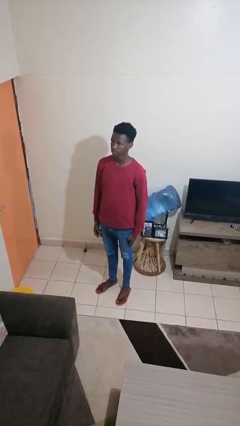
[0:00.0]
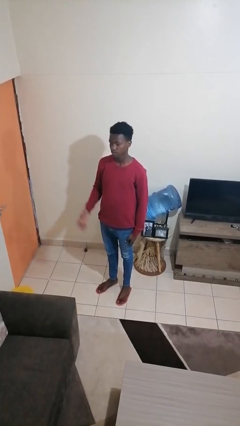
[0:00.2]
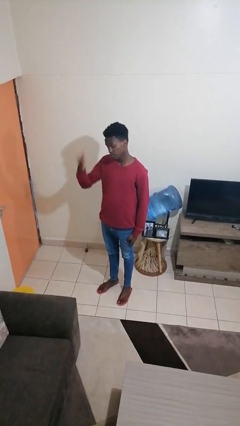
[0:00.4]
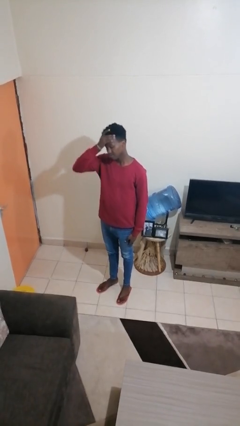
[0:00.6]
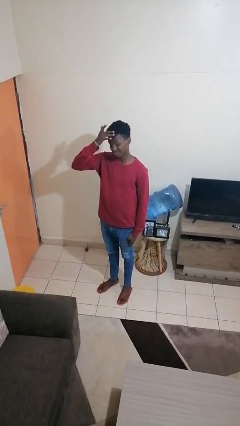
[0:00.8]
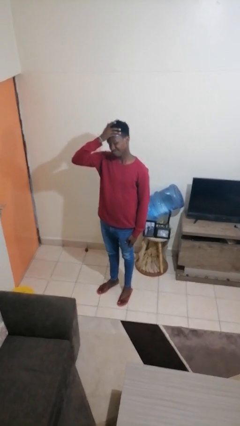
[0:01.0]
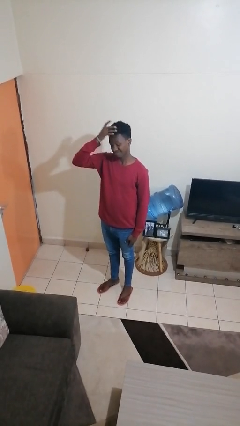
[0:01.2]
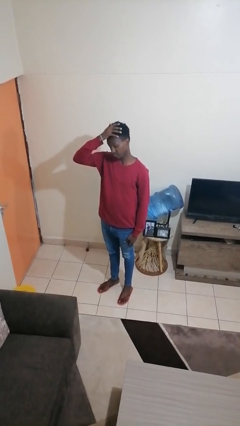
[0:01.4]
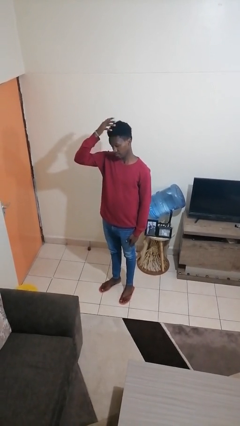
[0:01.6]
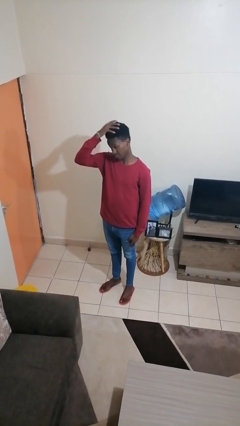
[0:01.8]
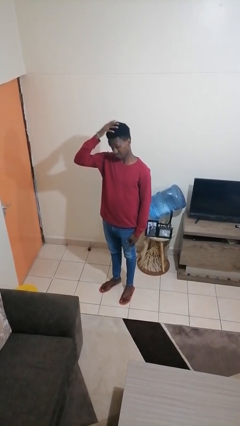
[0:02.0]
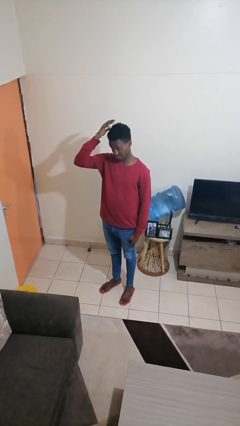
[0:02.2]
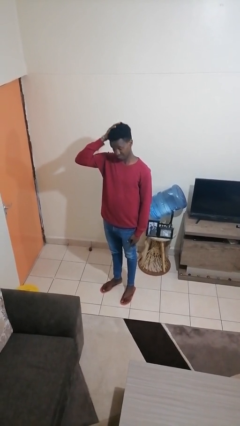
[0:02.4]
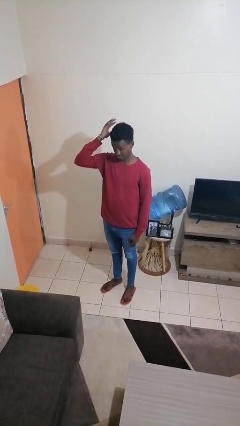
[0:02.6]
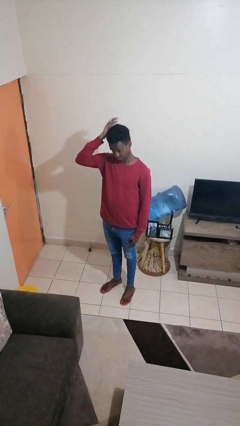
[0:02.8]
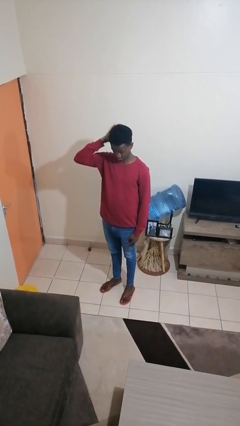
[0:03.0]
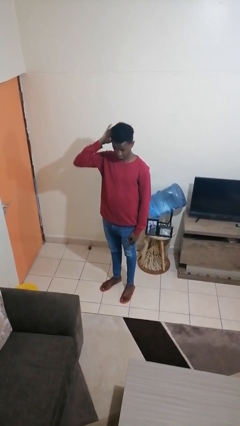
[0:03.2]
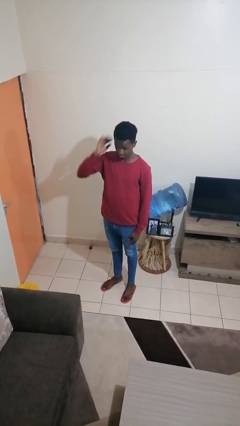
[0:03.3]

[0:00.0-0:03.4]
person pats head

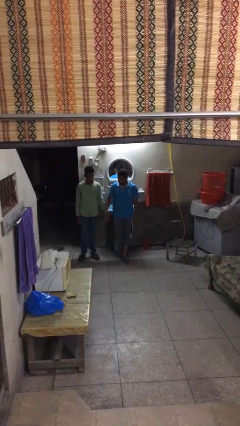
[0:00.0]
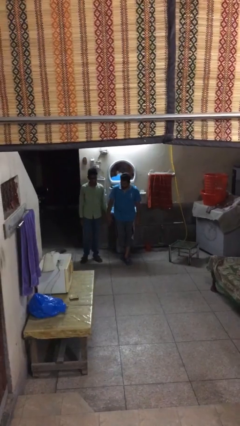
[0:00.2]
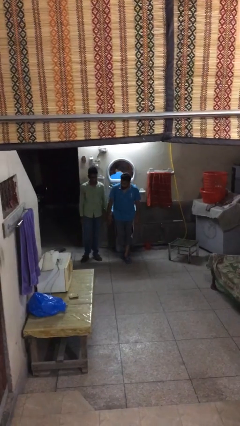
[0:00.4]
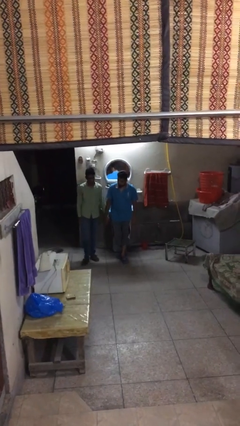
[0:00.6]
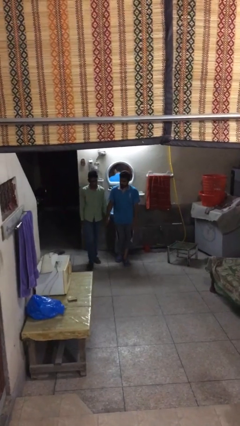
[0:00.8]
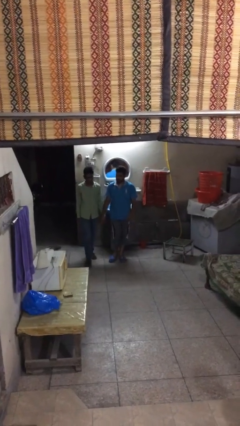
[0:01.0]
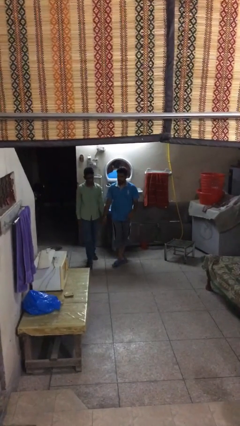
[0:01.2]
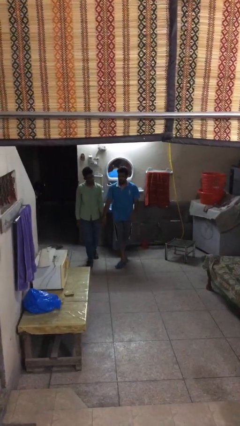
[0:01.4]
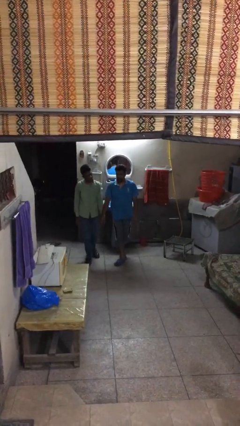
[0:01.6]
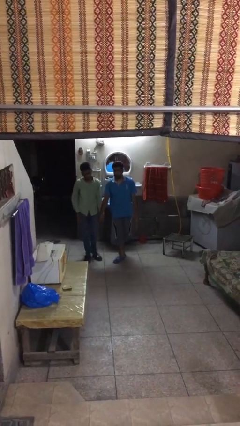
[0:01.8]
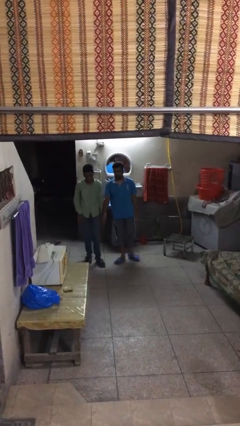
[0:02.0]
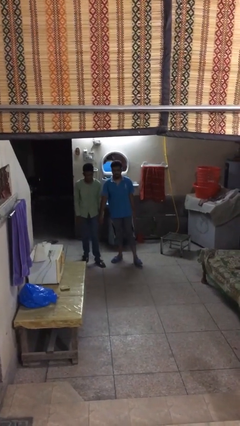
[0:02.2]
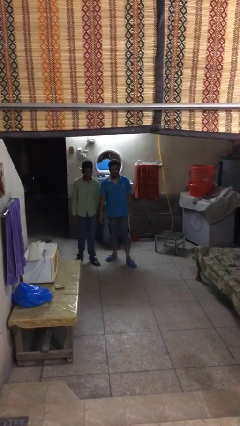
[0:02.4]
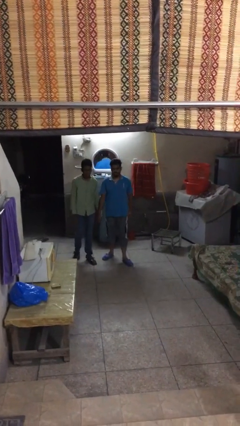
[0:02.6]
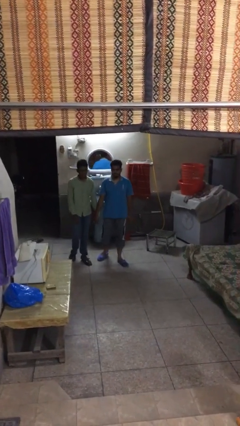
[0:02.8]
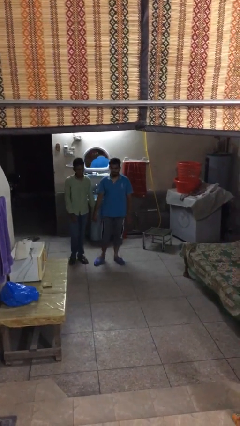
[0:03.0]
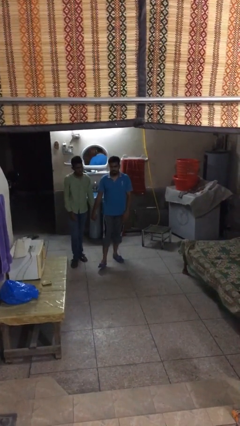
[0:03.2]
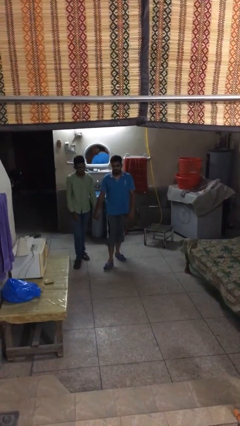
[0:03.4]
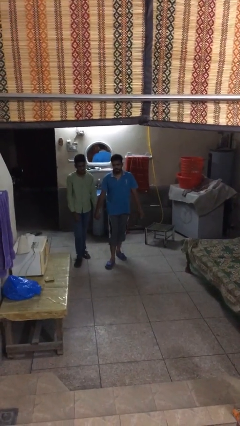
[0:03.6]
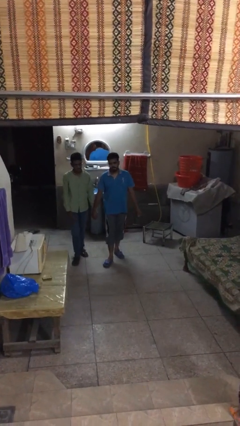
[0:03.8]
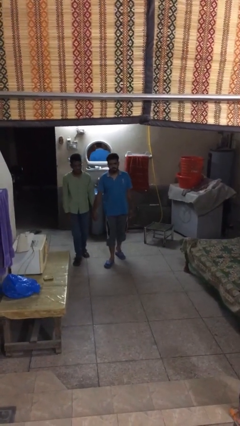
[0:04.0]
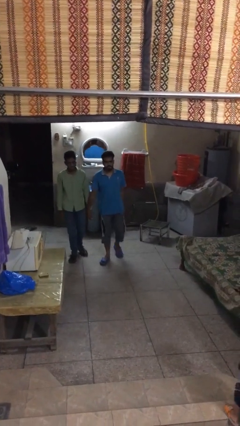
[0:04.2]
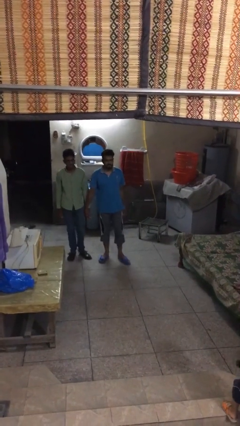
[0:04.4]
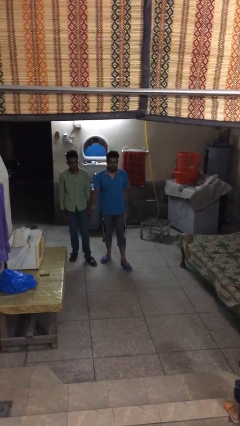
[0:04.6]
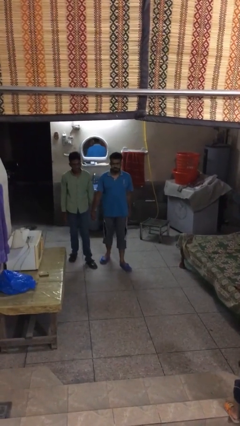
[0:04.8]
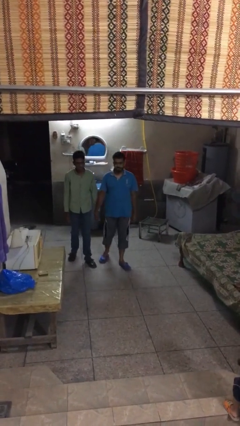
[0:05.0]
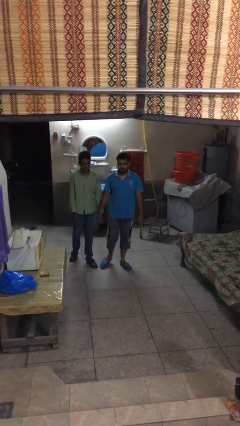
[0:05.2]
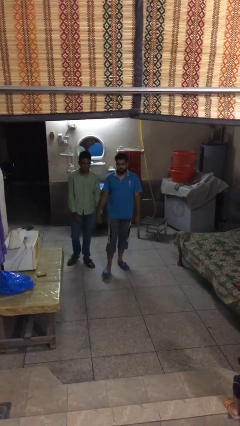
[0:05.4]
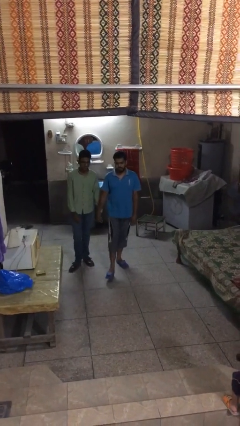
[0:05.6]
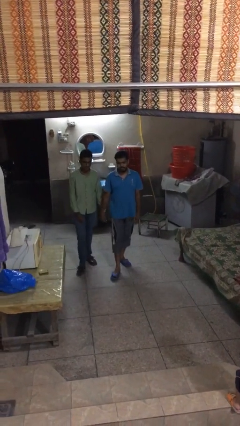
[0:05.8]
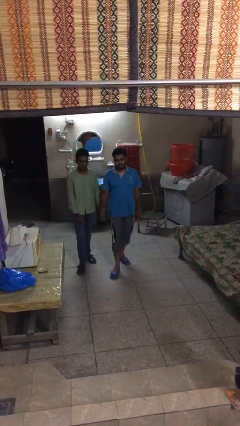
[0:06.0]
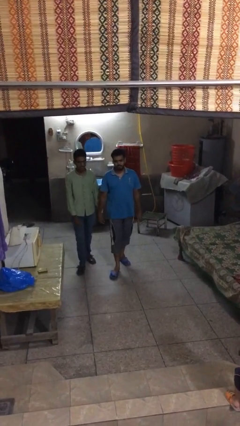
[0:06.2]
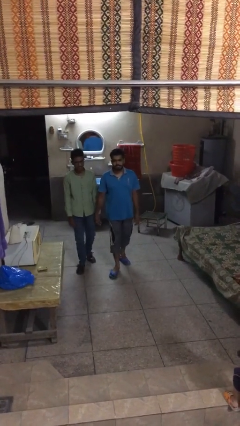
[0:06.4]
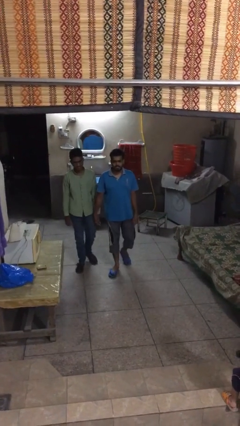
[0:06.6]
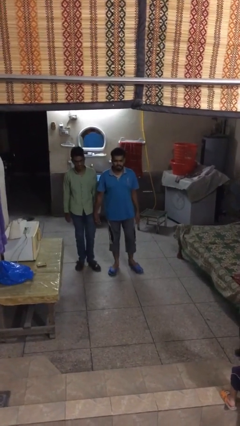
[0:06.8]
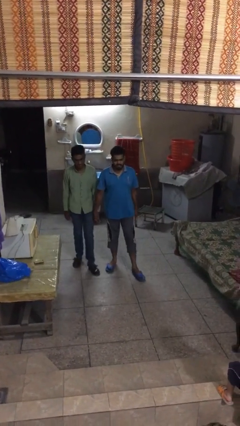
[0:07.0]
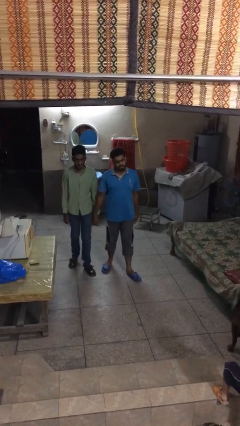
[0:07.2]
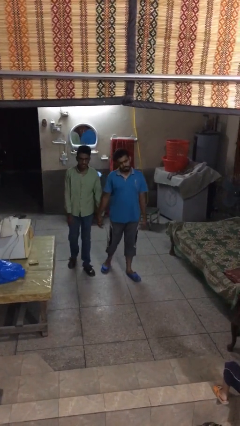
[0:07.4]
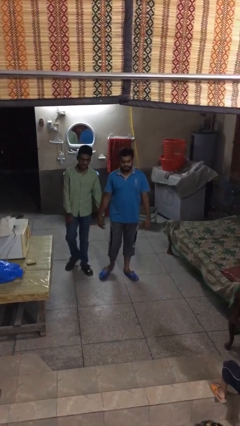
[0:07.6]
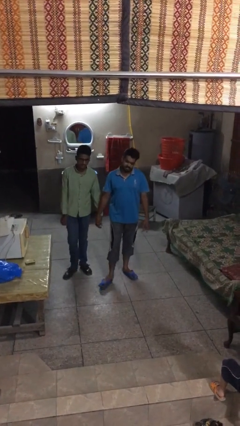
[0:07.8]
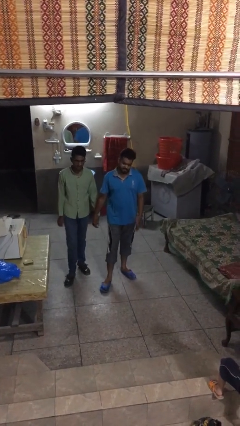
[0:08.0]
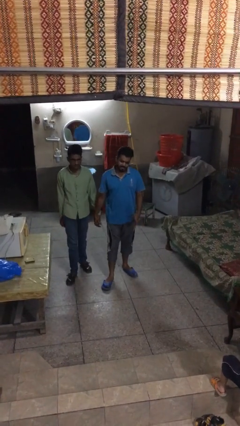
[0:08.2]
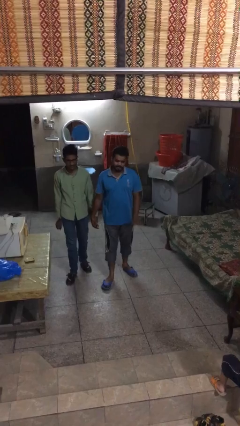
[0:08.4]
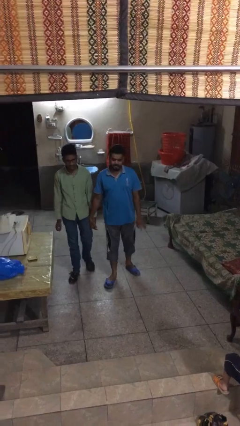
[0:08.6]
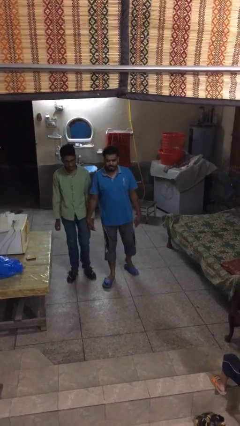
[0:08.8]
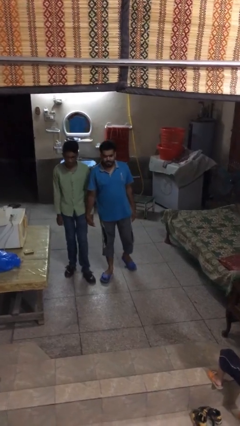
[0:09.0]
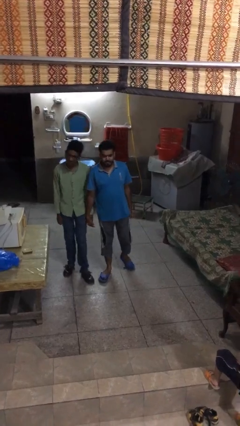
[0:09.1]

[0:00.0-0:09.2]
person holds hand

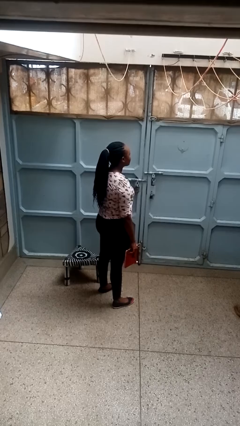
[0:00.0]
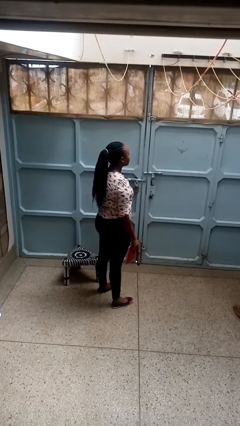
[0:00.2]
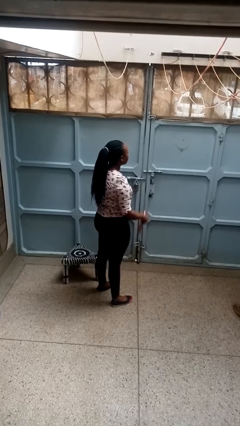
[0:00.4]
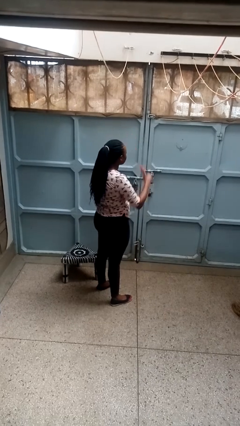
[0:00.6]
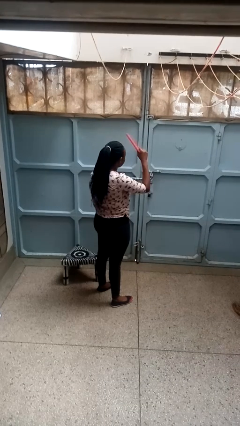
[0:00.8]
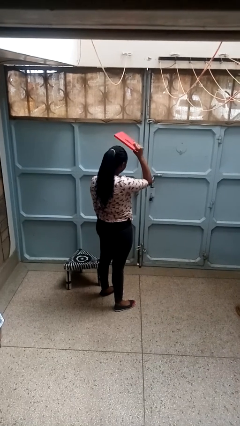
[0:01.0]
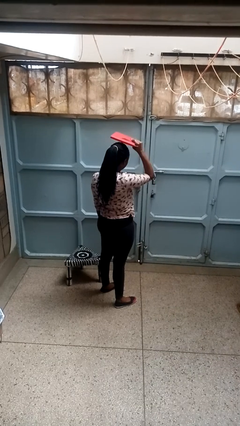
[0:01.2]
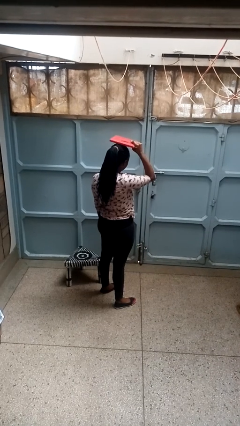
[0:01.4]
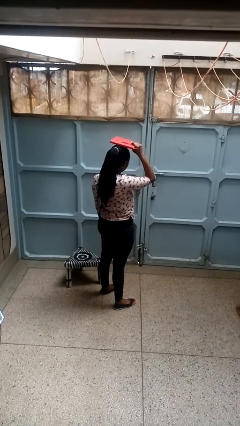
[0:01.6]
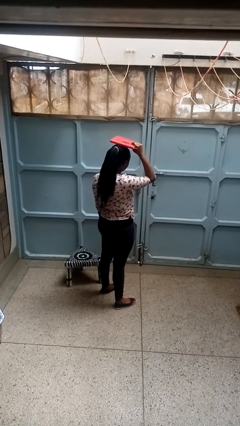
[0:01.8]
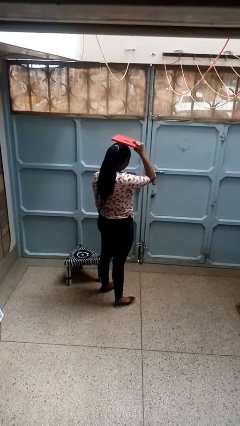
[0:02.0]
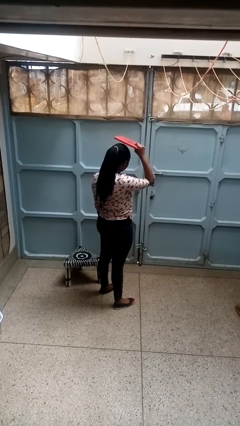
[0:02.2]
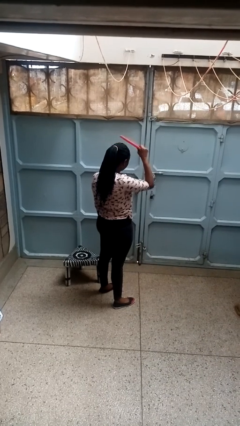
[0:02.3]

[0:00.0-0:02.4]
person holds object above head

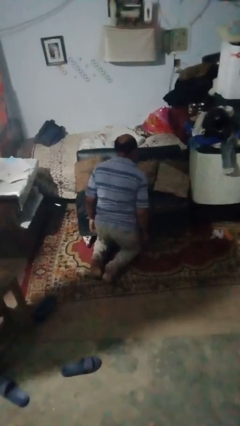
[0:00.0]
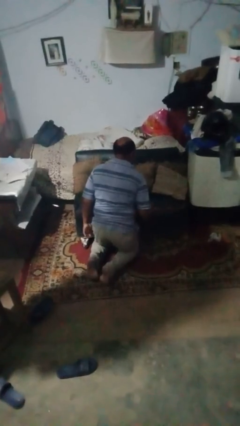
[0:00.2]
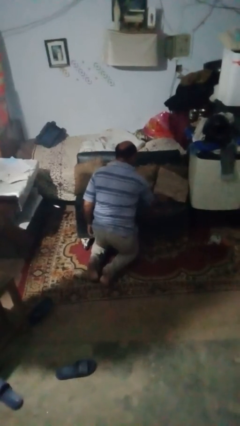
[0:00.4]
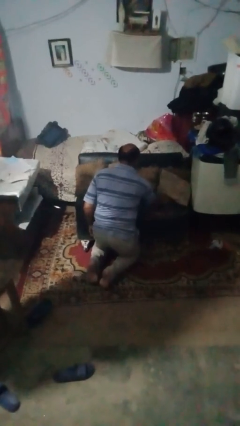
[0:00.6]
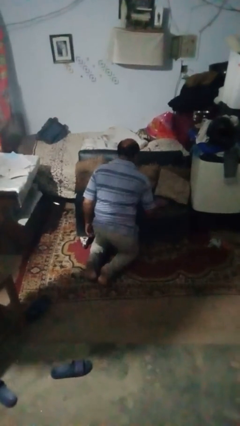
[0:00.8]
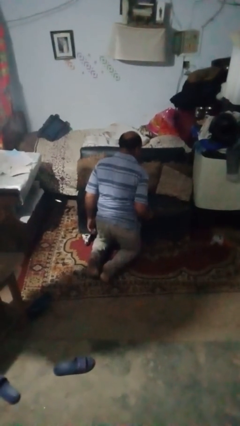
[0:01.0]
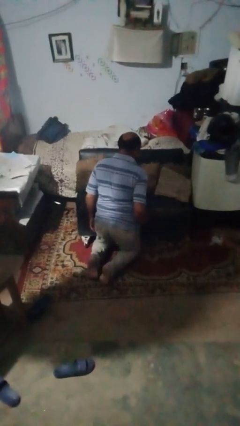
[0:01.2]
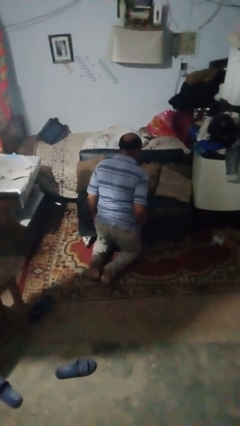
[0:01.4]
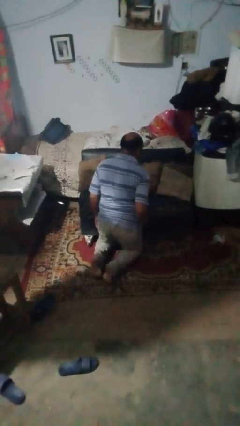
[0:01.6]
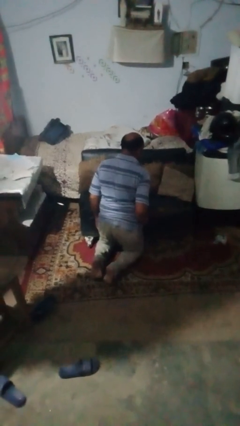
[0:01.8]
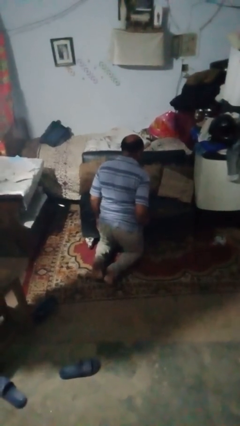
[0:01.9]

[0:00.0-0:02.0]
person searches in couch

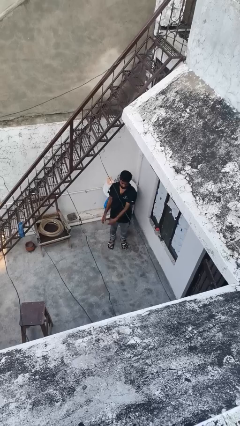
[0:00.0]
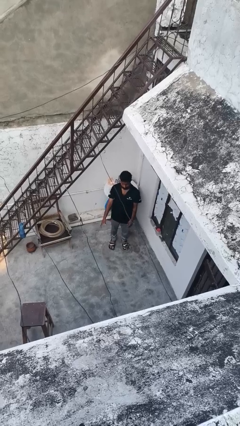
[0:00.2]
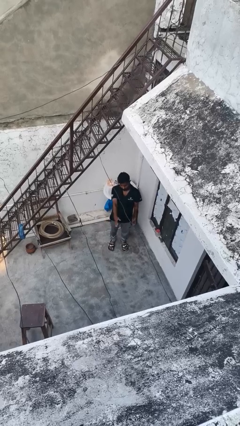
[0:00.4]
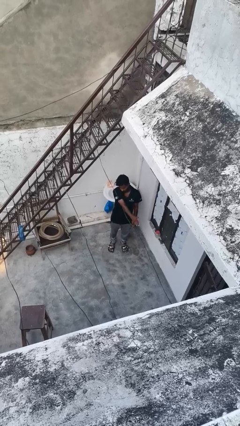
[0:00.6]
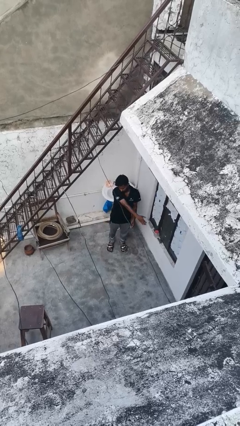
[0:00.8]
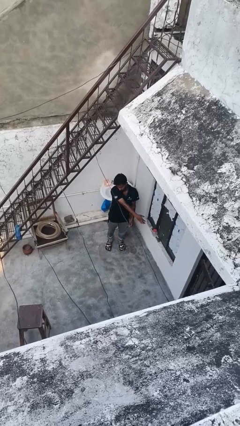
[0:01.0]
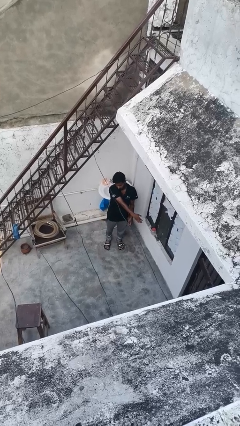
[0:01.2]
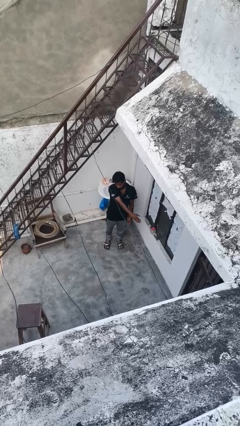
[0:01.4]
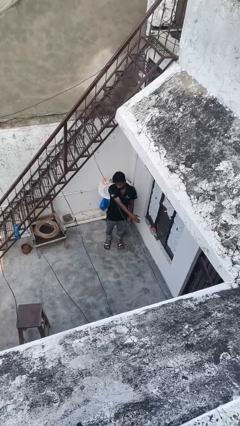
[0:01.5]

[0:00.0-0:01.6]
person gestures swipe right
